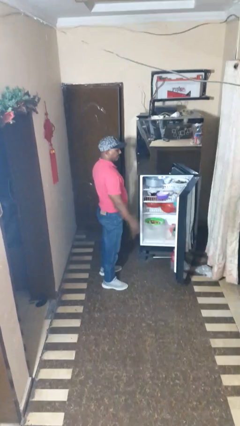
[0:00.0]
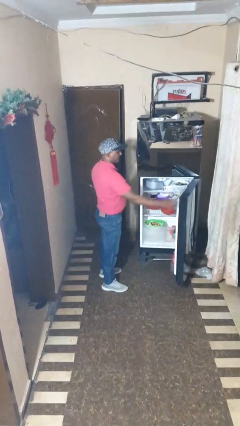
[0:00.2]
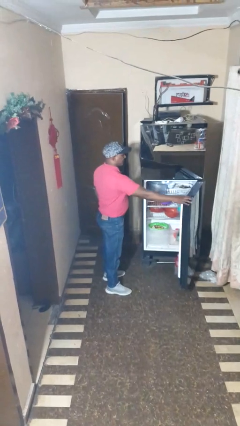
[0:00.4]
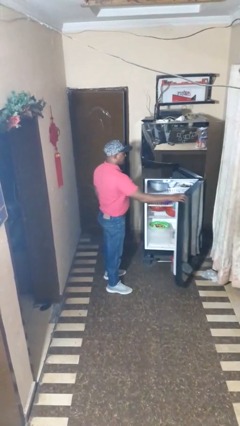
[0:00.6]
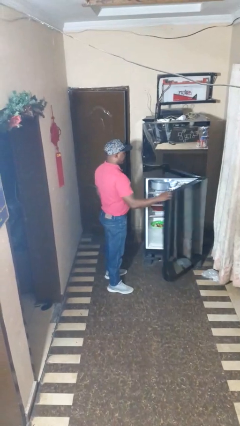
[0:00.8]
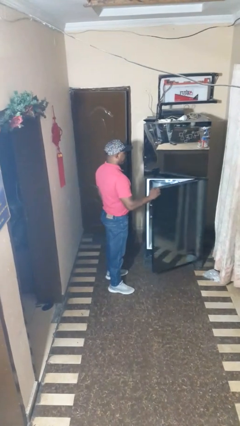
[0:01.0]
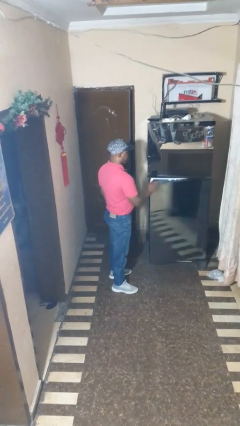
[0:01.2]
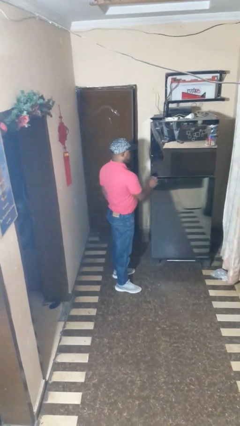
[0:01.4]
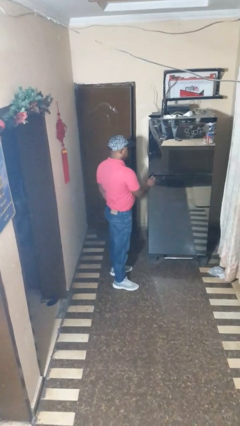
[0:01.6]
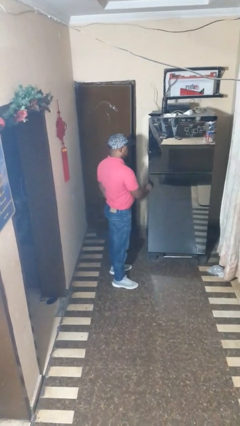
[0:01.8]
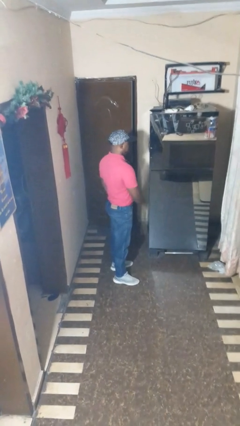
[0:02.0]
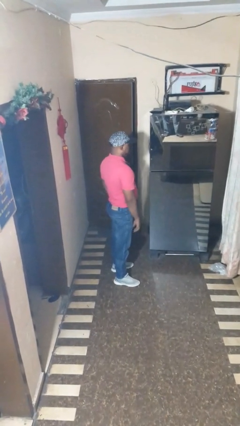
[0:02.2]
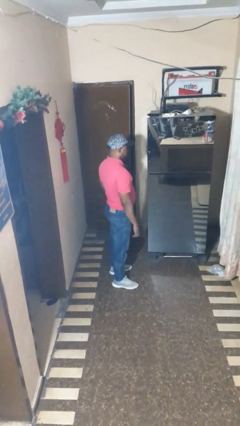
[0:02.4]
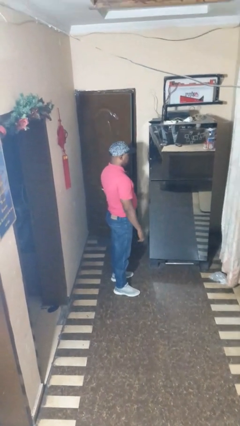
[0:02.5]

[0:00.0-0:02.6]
person closes refrigerator

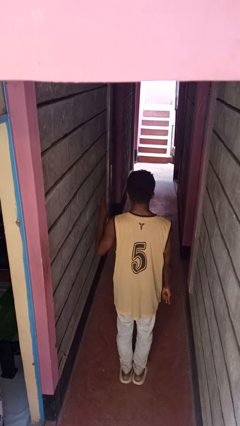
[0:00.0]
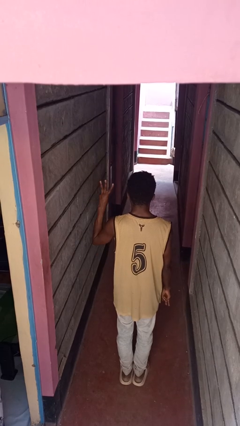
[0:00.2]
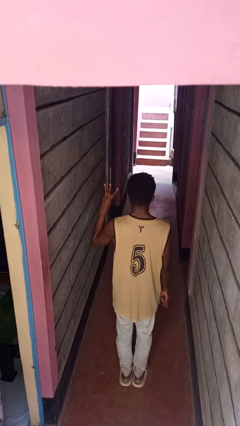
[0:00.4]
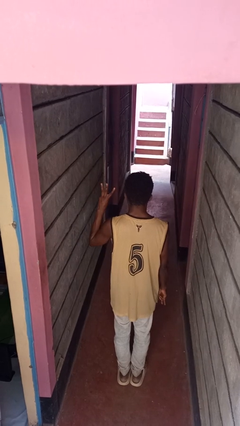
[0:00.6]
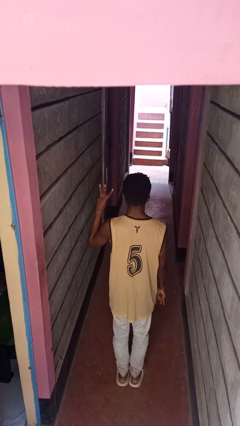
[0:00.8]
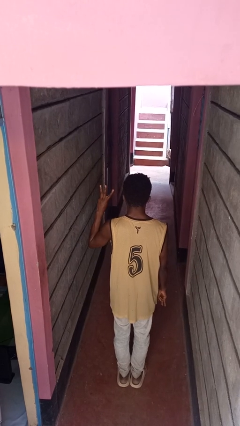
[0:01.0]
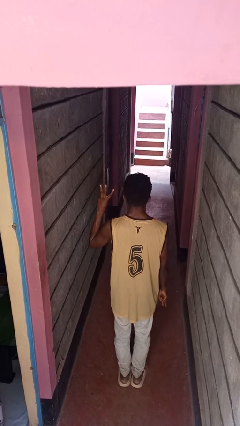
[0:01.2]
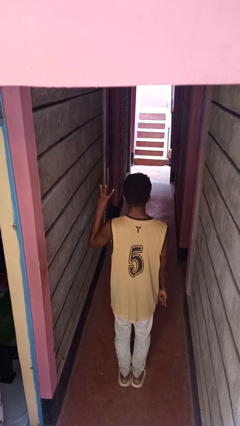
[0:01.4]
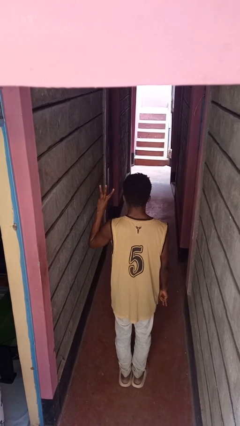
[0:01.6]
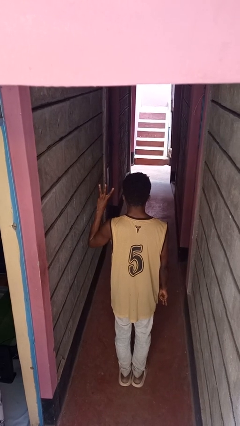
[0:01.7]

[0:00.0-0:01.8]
person gestures number three

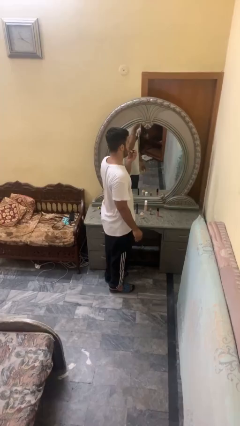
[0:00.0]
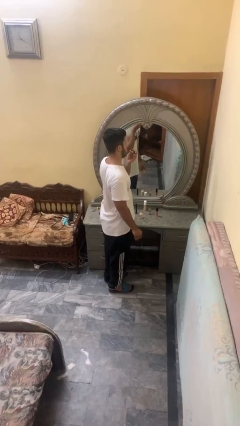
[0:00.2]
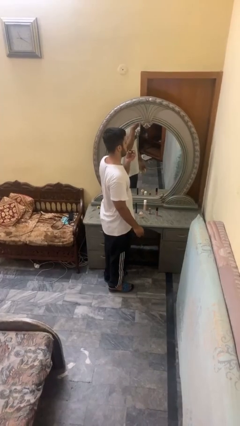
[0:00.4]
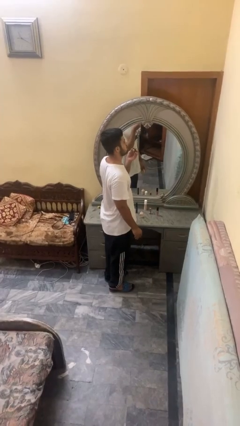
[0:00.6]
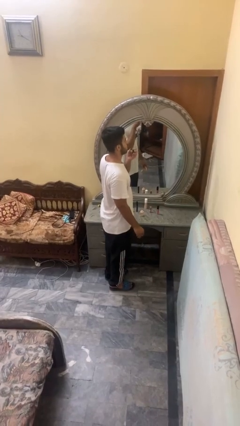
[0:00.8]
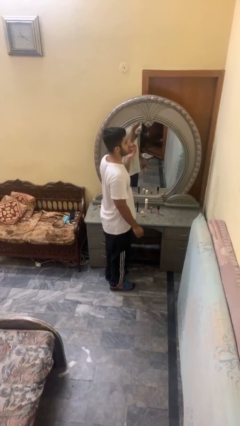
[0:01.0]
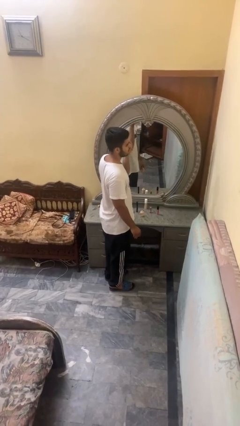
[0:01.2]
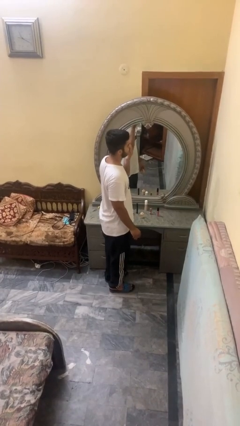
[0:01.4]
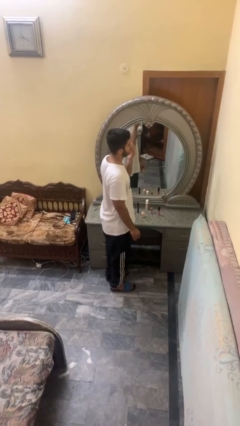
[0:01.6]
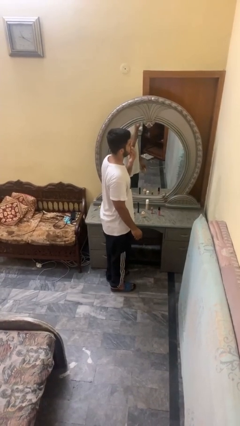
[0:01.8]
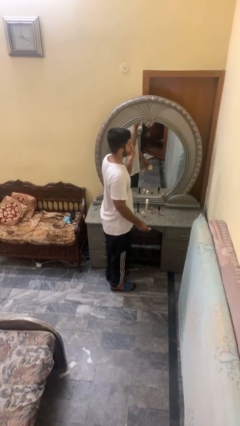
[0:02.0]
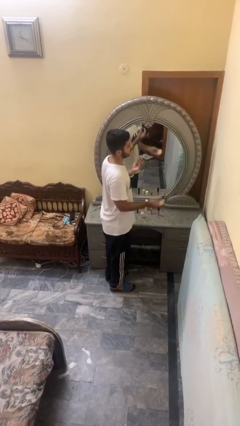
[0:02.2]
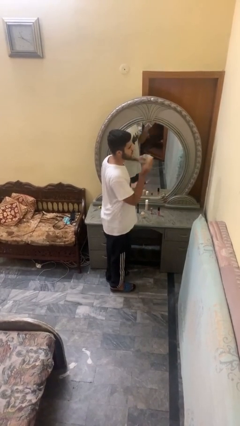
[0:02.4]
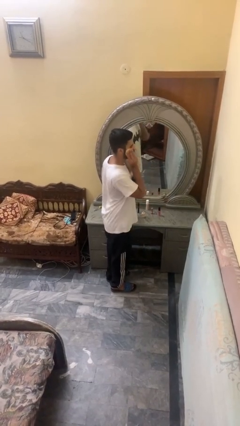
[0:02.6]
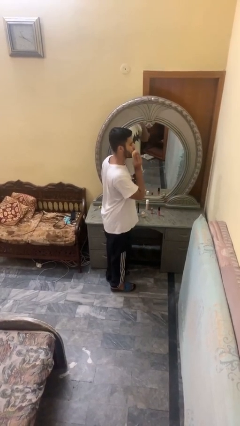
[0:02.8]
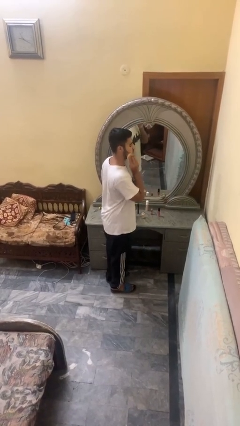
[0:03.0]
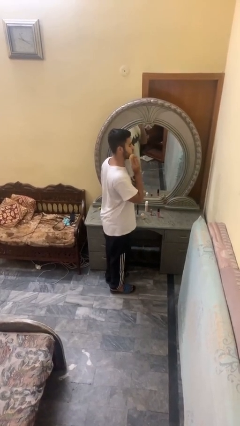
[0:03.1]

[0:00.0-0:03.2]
person applies foundation makeup

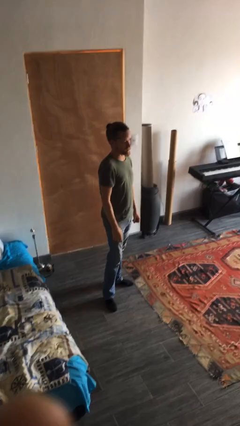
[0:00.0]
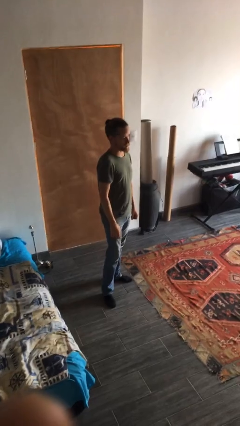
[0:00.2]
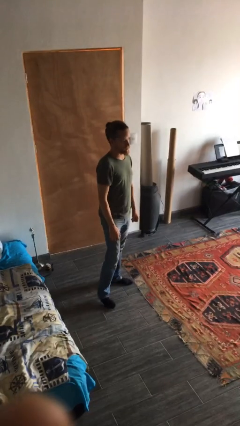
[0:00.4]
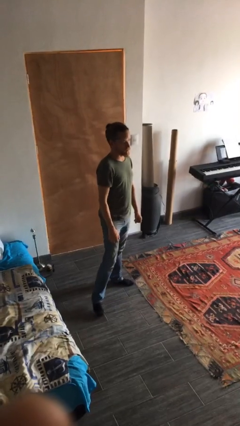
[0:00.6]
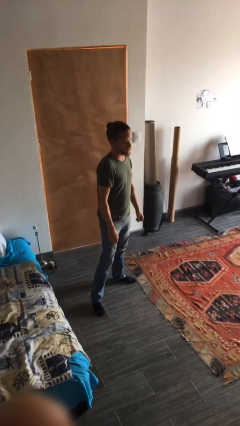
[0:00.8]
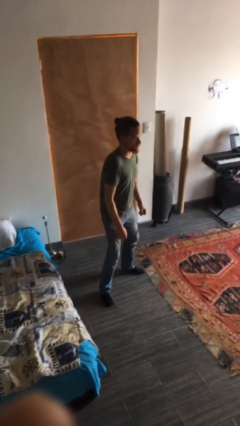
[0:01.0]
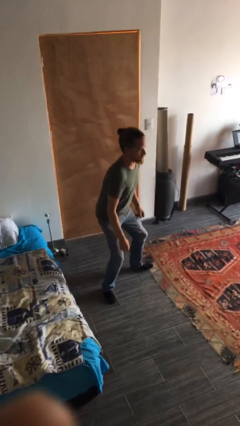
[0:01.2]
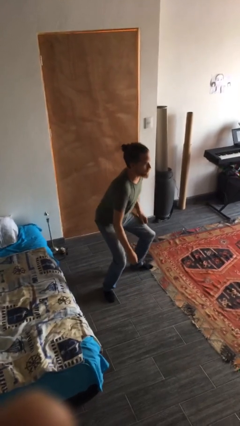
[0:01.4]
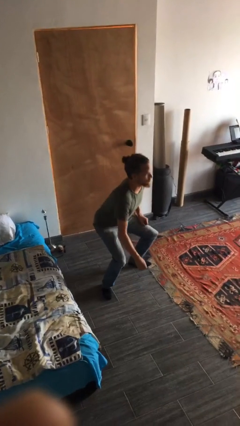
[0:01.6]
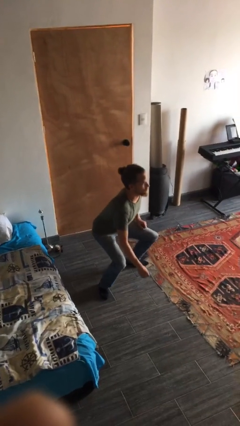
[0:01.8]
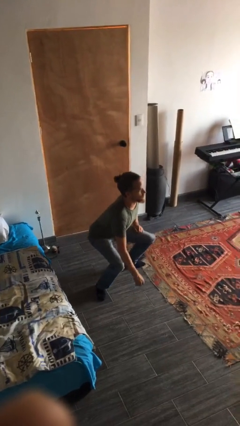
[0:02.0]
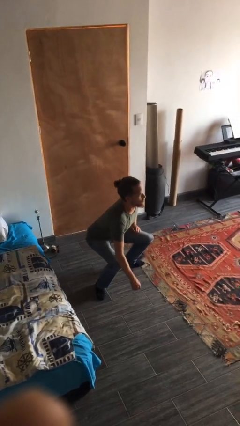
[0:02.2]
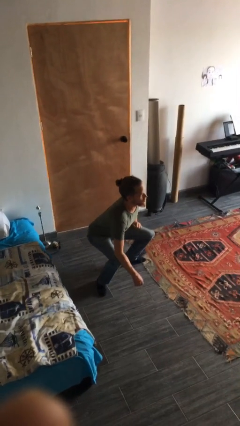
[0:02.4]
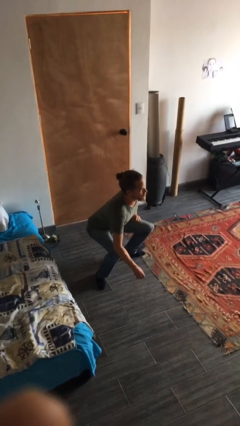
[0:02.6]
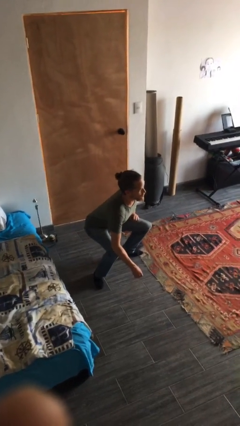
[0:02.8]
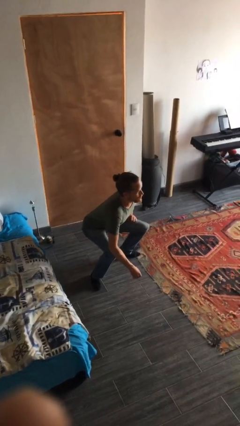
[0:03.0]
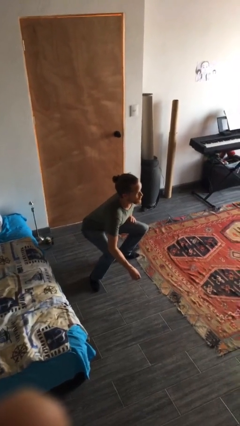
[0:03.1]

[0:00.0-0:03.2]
person squats

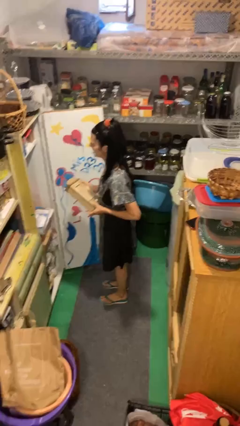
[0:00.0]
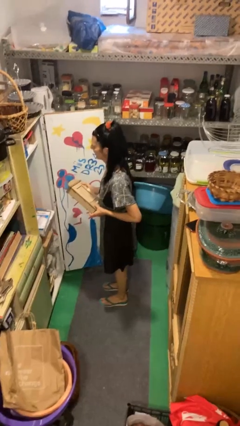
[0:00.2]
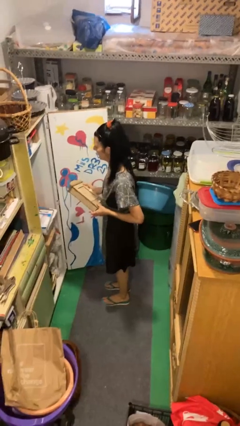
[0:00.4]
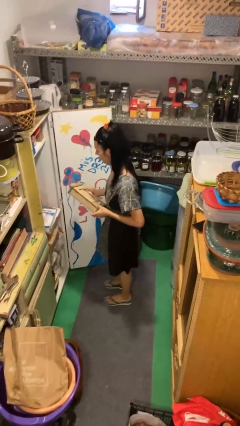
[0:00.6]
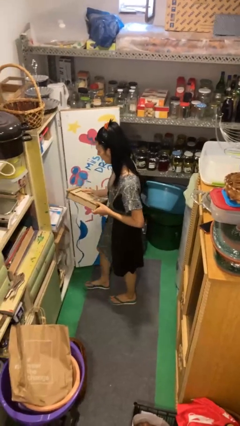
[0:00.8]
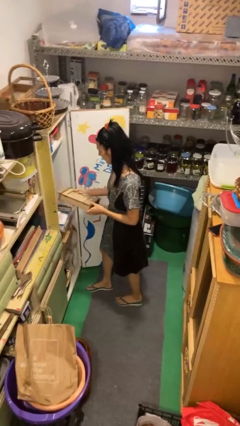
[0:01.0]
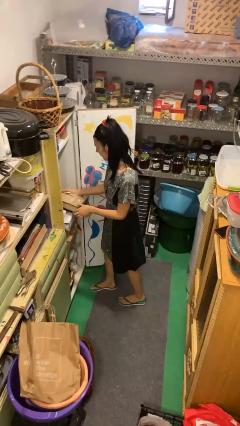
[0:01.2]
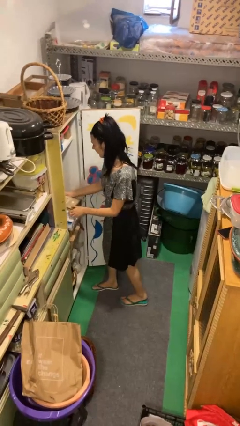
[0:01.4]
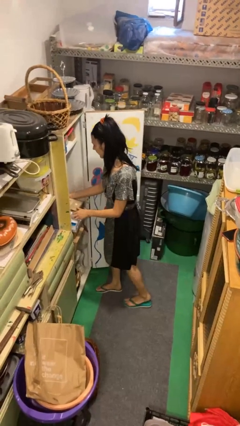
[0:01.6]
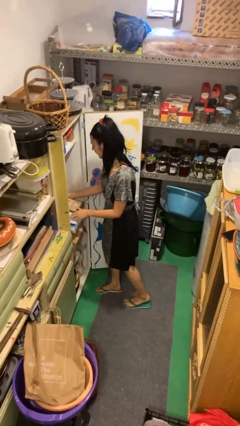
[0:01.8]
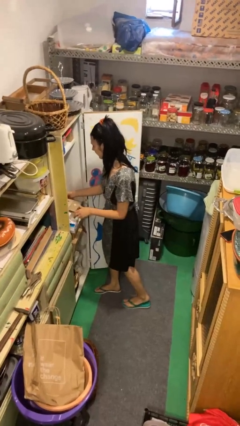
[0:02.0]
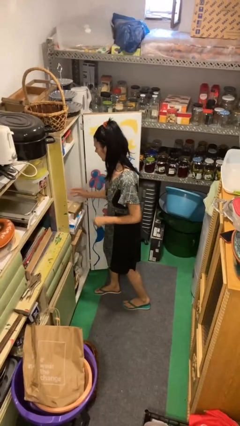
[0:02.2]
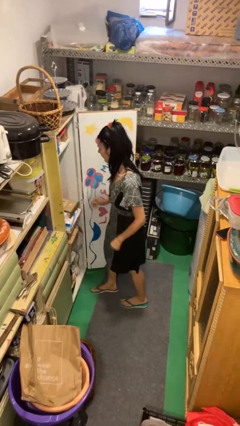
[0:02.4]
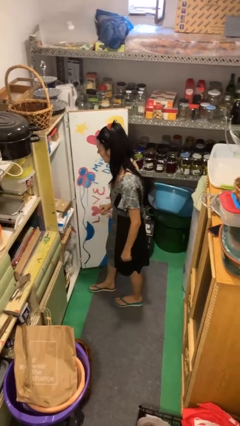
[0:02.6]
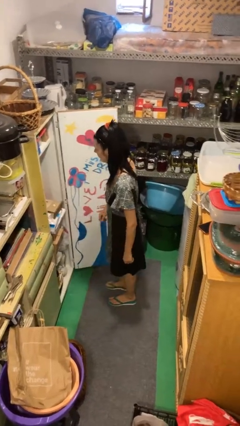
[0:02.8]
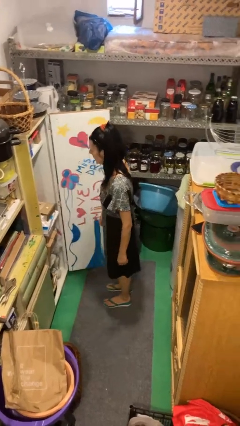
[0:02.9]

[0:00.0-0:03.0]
person puts down object into cabinet

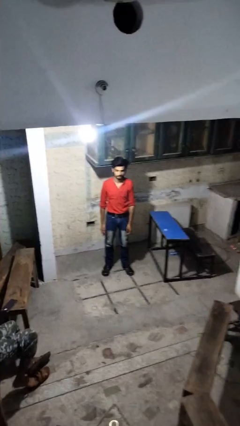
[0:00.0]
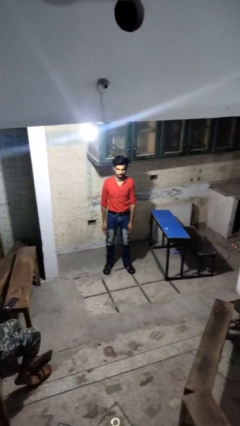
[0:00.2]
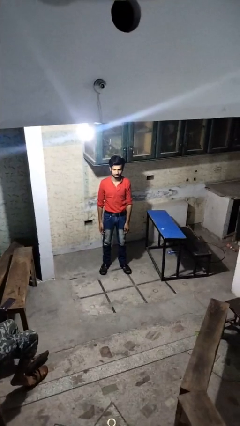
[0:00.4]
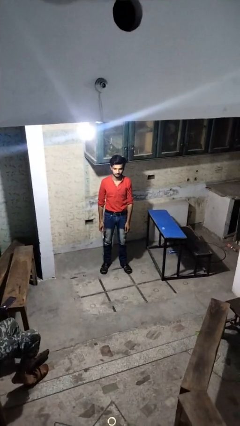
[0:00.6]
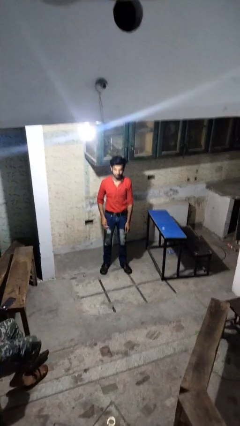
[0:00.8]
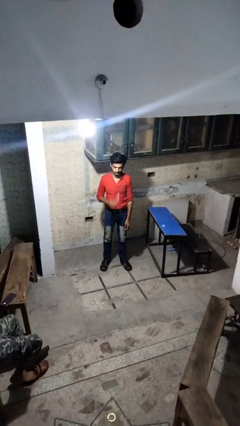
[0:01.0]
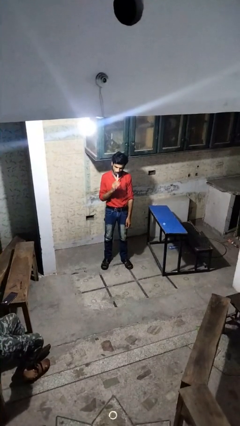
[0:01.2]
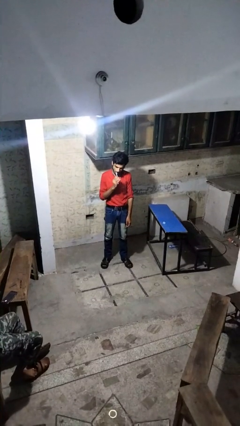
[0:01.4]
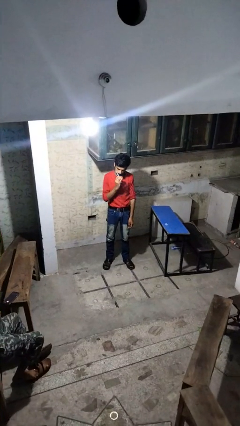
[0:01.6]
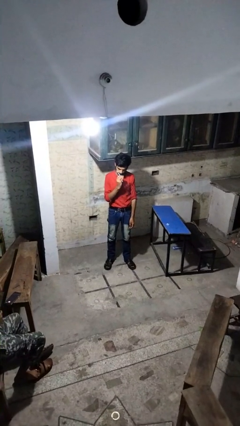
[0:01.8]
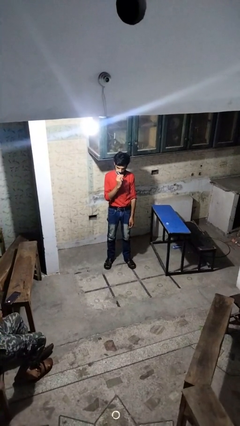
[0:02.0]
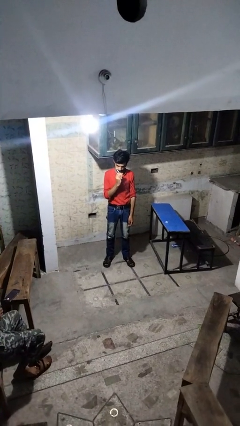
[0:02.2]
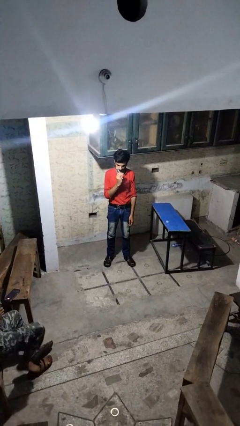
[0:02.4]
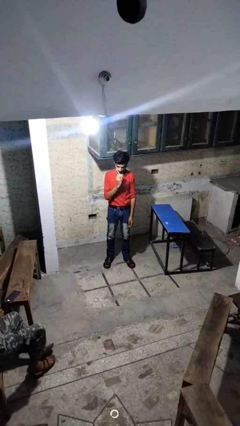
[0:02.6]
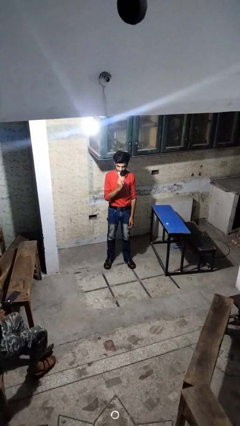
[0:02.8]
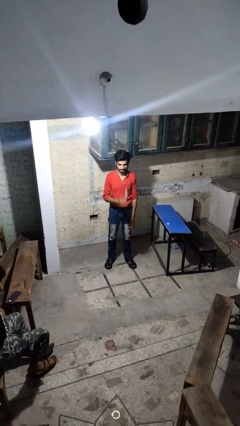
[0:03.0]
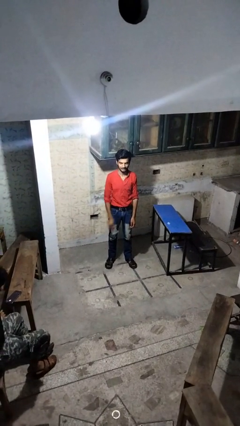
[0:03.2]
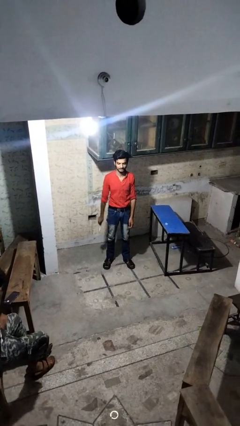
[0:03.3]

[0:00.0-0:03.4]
person brushes teeth
